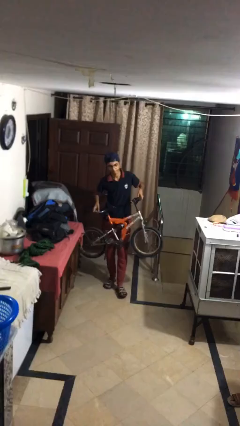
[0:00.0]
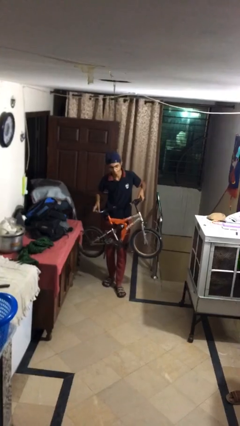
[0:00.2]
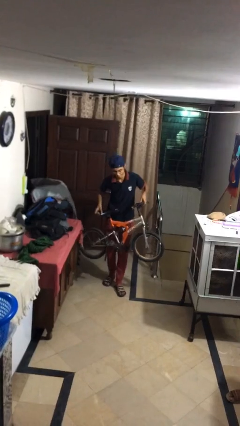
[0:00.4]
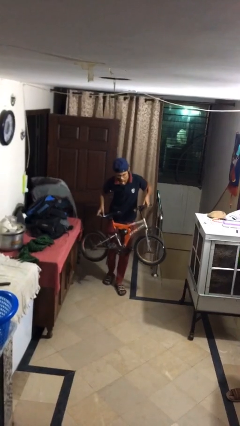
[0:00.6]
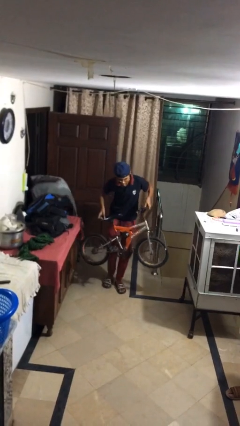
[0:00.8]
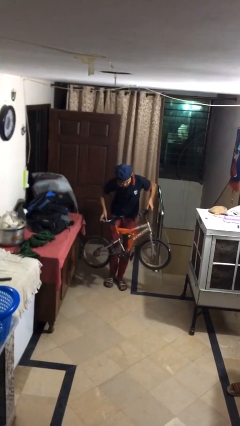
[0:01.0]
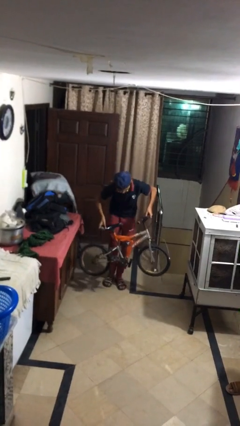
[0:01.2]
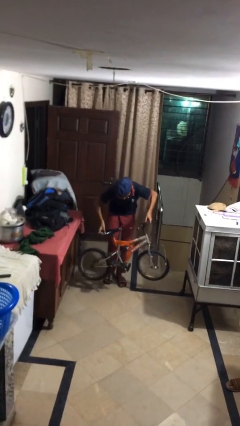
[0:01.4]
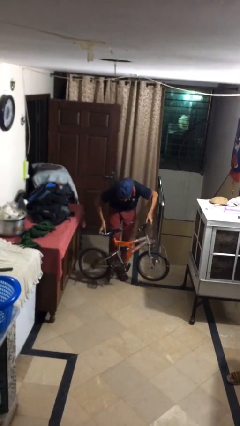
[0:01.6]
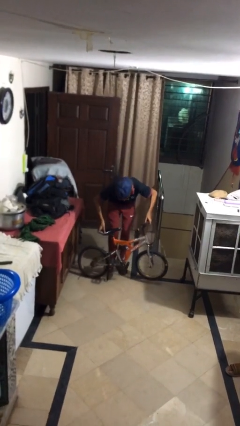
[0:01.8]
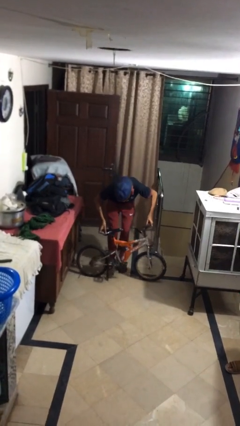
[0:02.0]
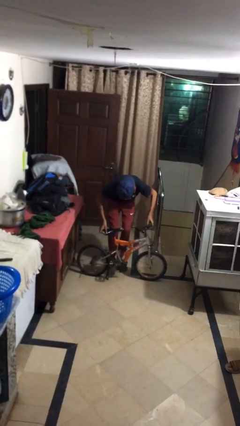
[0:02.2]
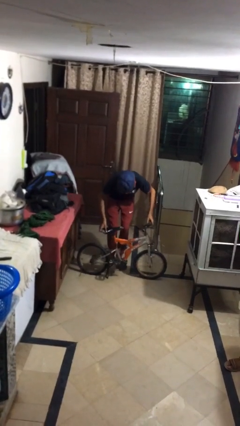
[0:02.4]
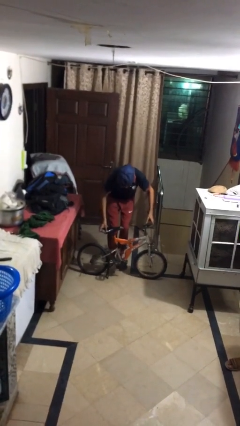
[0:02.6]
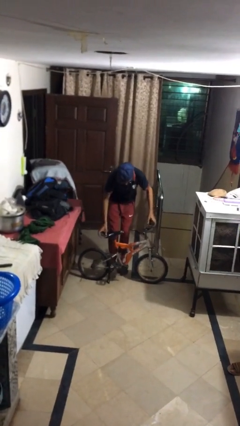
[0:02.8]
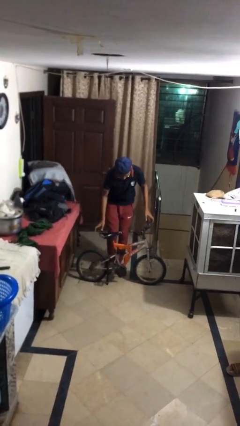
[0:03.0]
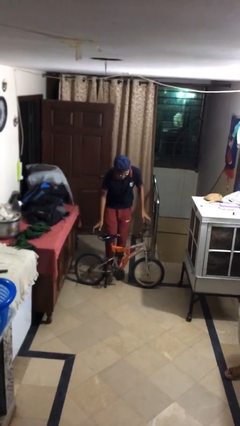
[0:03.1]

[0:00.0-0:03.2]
person puts down object on floor

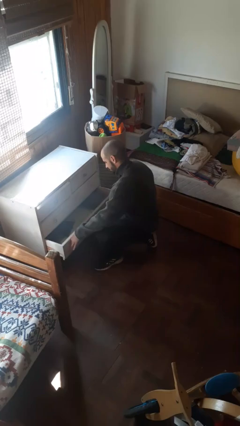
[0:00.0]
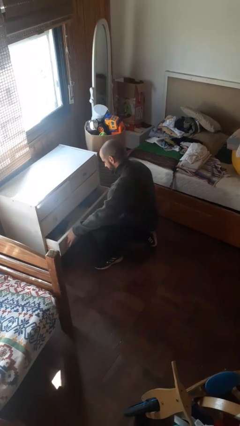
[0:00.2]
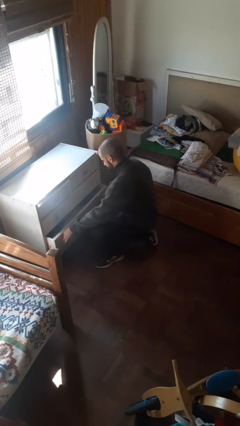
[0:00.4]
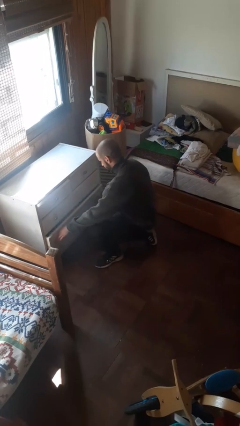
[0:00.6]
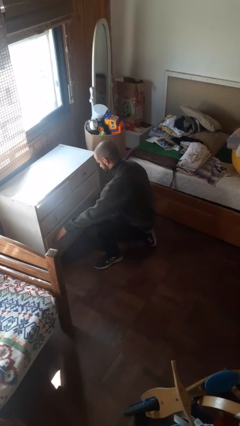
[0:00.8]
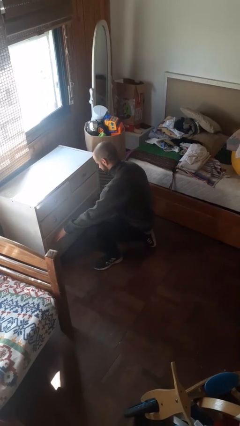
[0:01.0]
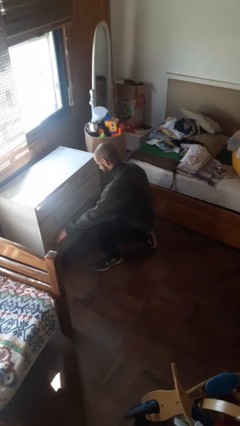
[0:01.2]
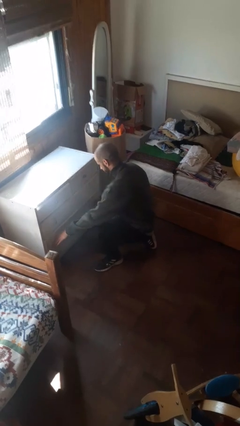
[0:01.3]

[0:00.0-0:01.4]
person closes dresser drawer

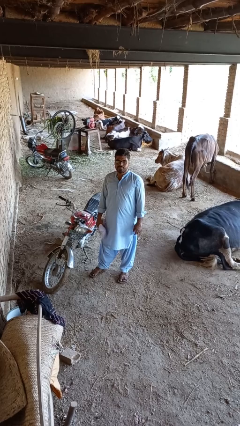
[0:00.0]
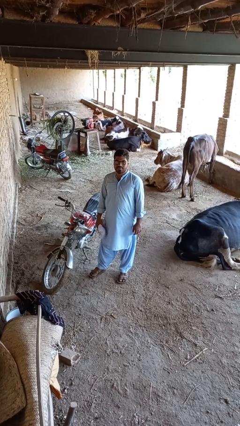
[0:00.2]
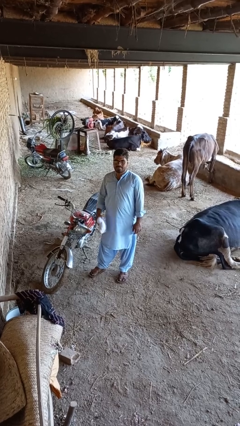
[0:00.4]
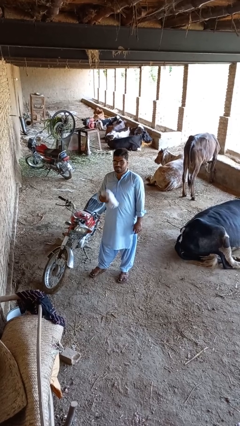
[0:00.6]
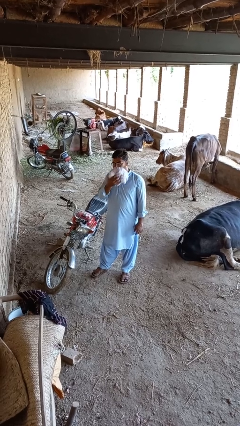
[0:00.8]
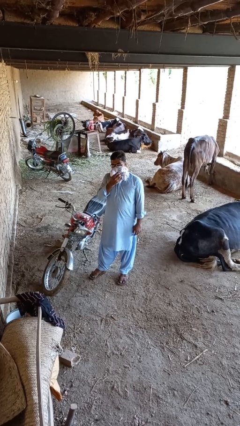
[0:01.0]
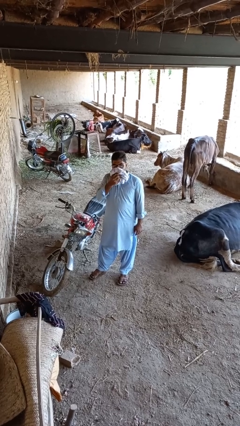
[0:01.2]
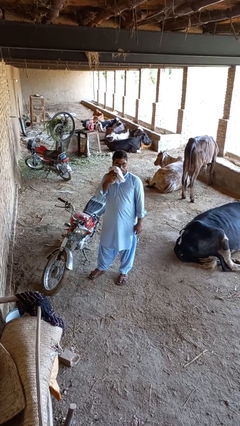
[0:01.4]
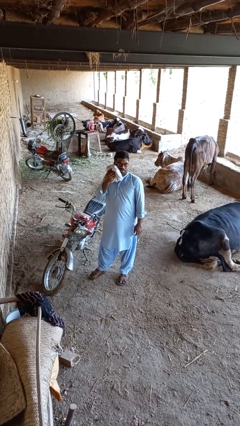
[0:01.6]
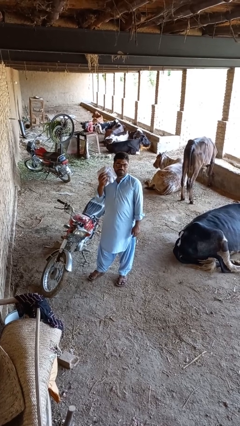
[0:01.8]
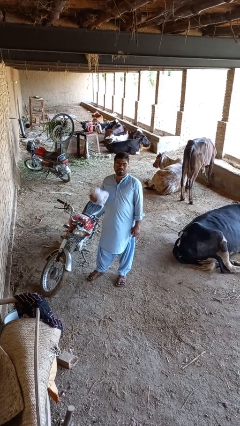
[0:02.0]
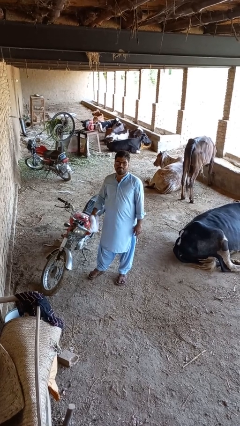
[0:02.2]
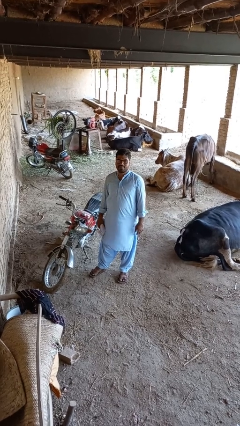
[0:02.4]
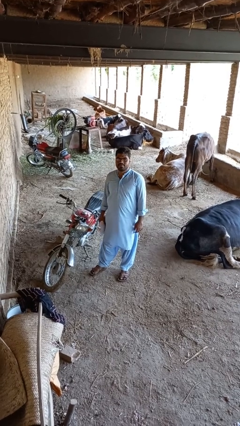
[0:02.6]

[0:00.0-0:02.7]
person wipes mouth with napkin

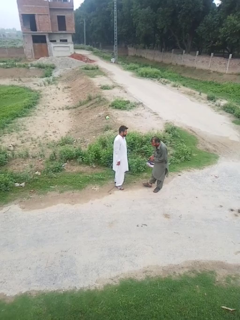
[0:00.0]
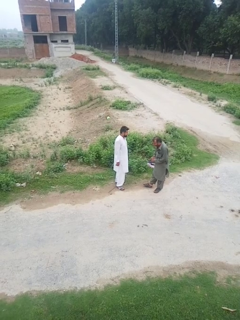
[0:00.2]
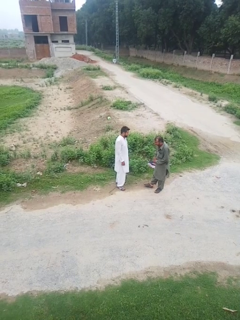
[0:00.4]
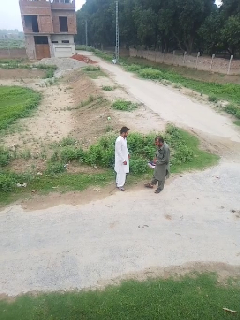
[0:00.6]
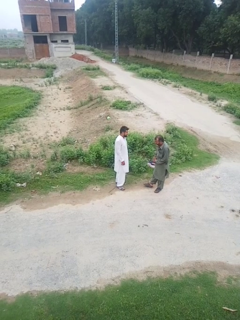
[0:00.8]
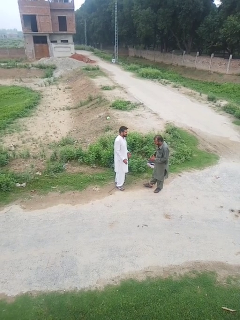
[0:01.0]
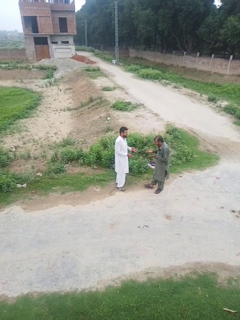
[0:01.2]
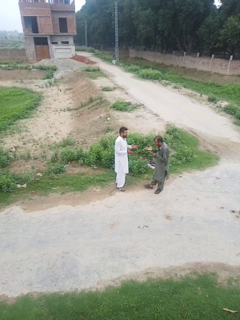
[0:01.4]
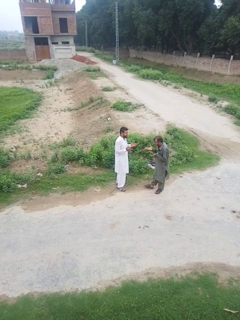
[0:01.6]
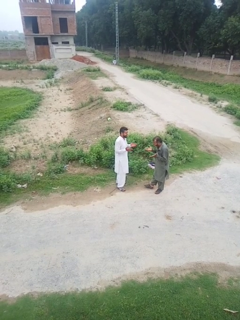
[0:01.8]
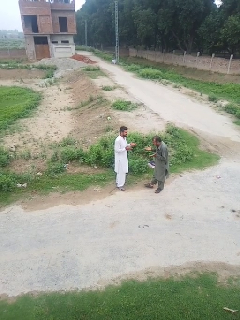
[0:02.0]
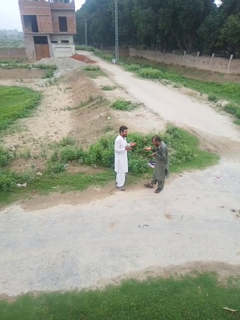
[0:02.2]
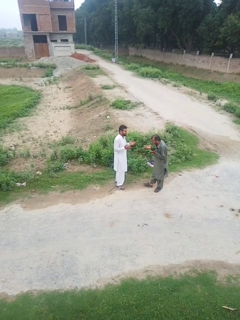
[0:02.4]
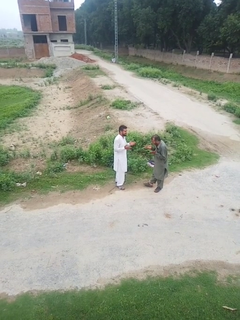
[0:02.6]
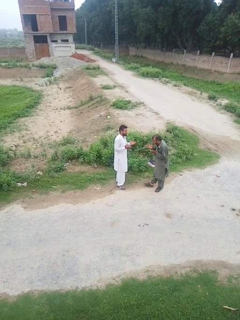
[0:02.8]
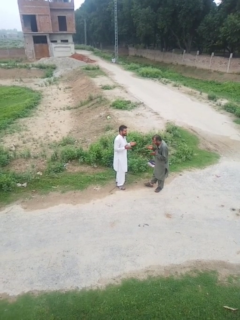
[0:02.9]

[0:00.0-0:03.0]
person laughs with person

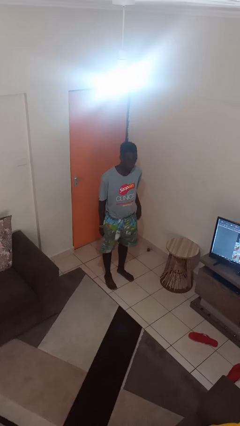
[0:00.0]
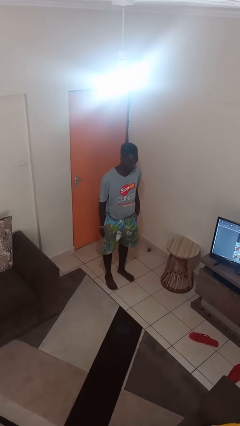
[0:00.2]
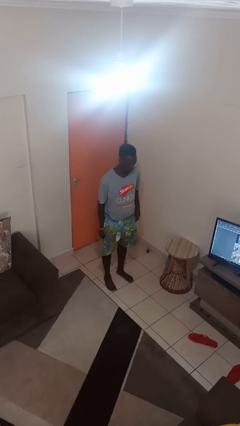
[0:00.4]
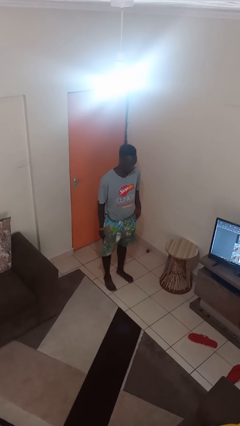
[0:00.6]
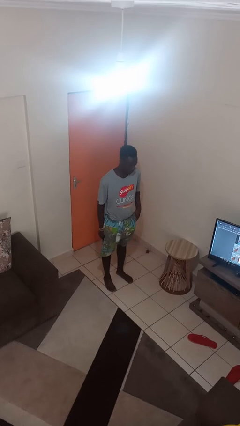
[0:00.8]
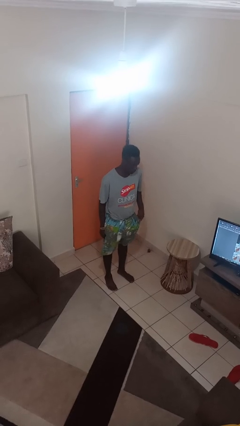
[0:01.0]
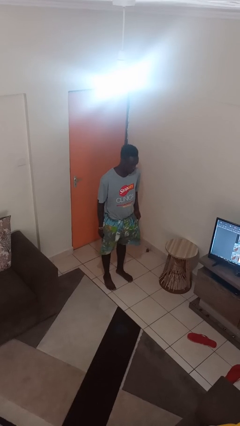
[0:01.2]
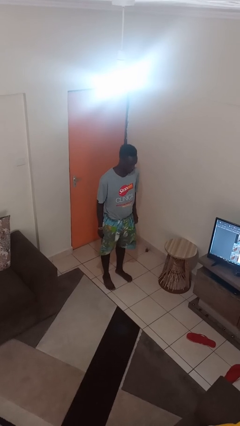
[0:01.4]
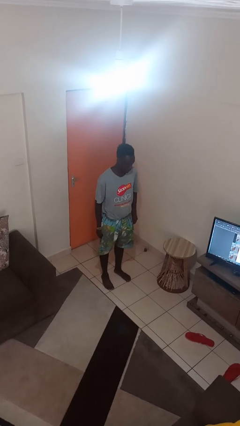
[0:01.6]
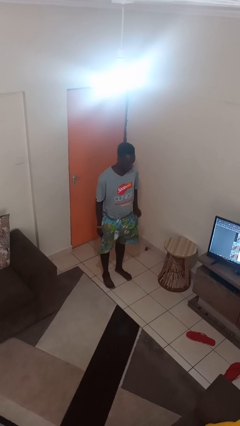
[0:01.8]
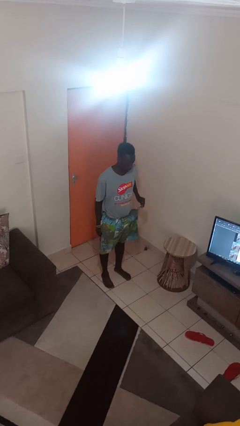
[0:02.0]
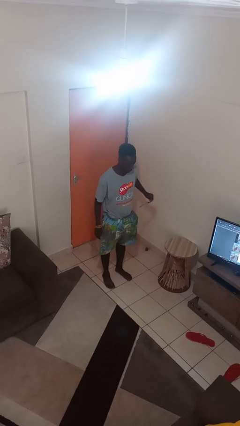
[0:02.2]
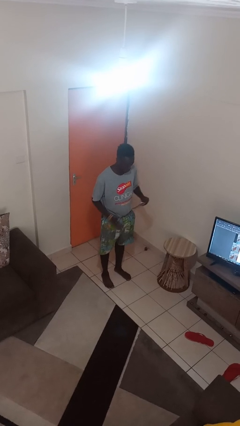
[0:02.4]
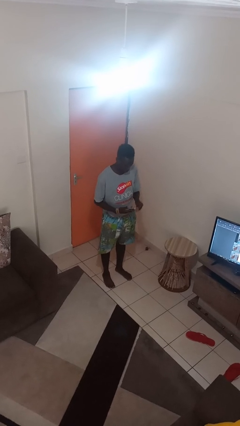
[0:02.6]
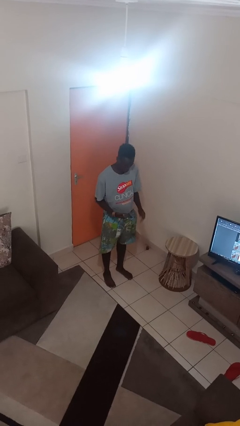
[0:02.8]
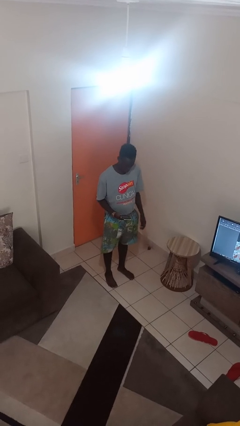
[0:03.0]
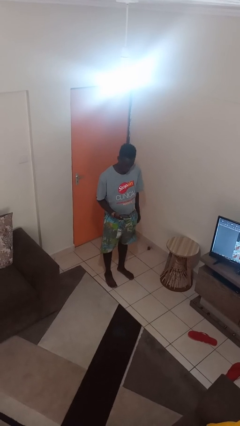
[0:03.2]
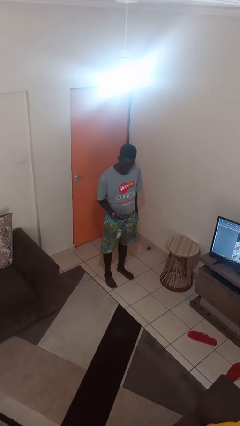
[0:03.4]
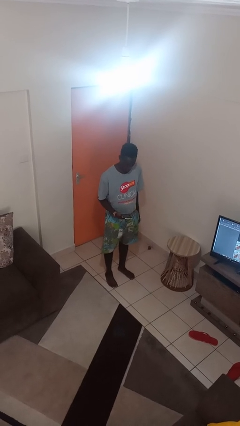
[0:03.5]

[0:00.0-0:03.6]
person takes phone from pocket

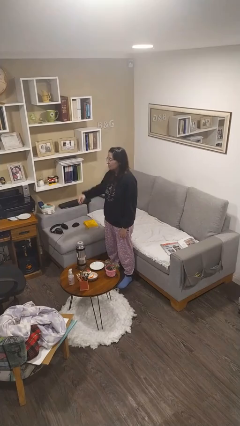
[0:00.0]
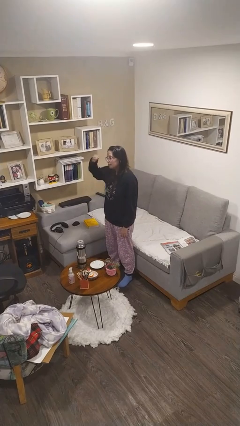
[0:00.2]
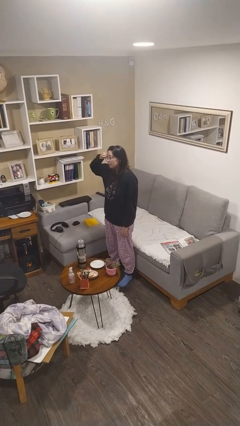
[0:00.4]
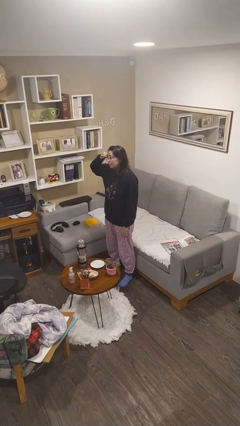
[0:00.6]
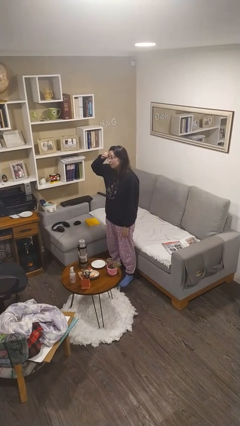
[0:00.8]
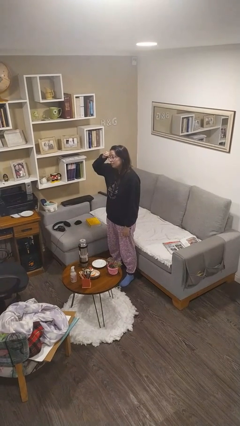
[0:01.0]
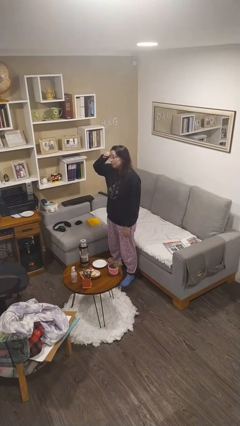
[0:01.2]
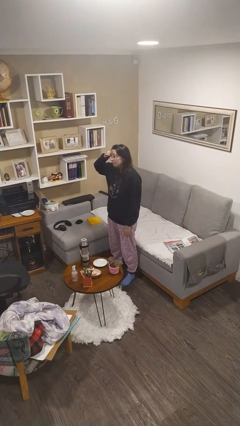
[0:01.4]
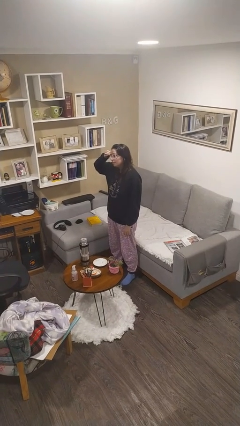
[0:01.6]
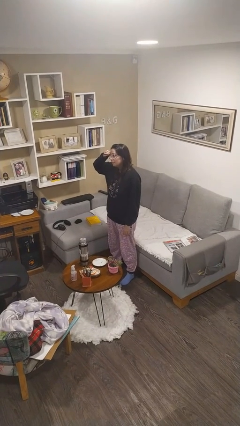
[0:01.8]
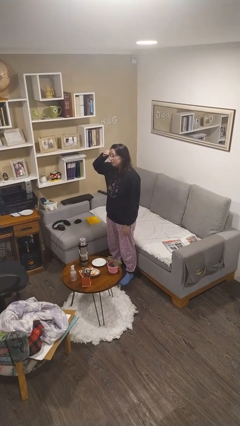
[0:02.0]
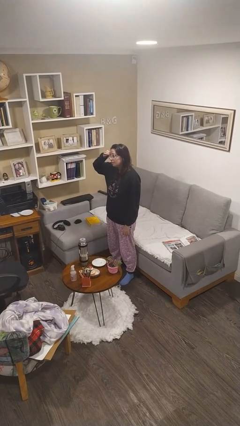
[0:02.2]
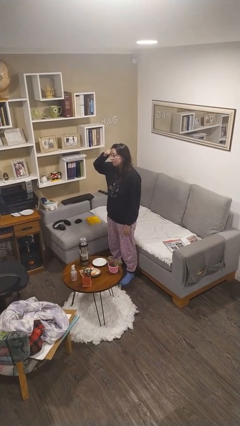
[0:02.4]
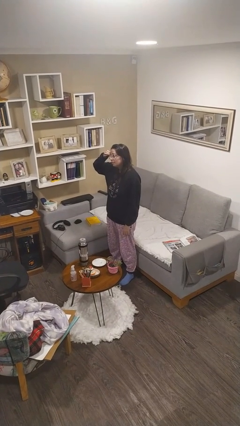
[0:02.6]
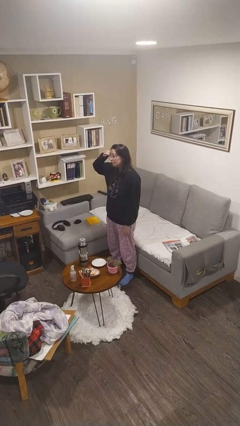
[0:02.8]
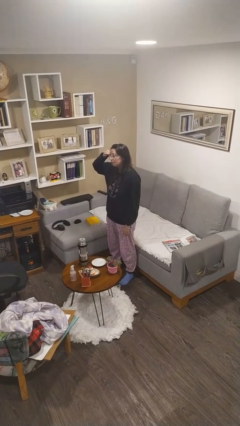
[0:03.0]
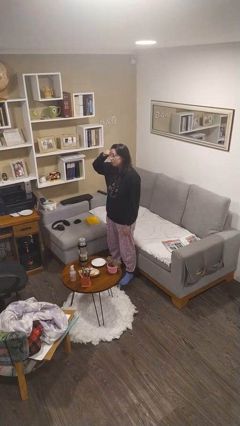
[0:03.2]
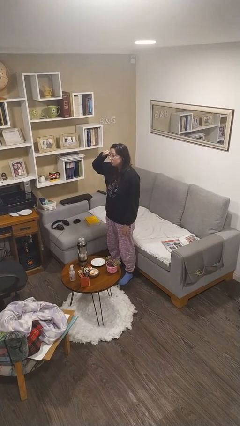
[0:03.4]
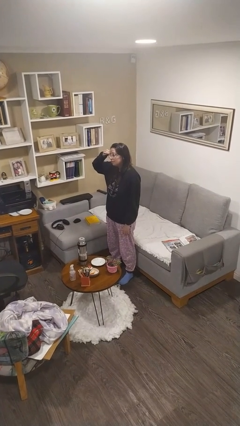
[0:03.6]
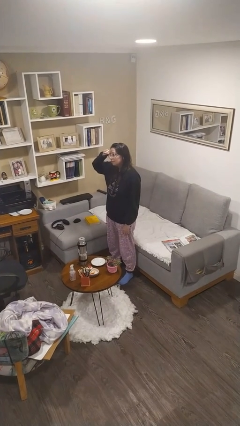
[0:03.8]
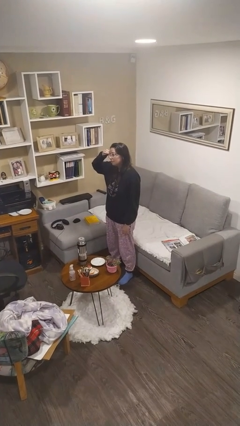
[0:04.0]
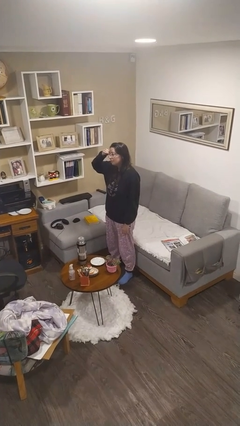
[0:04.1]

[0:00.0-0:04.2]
person scratches face
